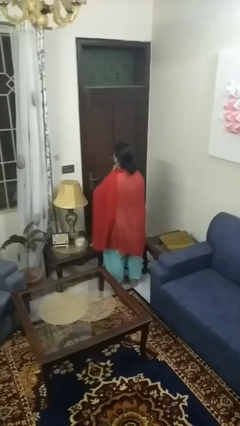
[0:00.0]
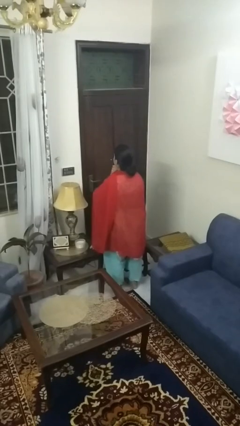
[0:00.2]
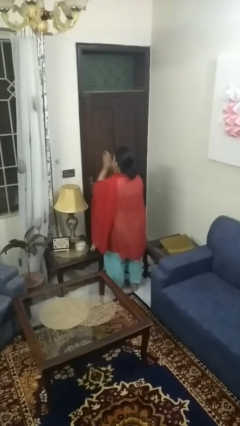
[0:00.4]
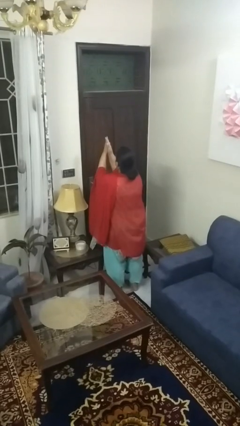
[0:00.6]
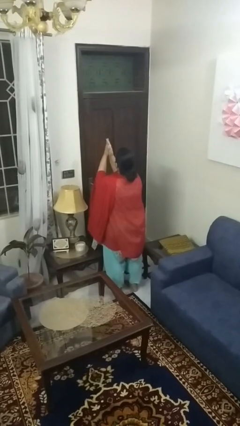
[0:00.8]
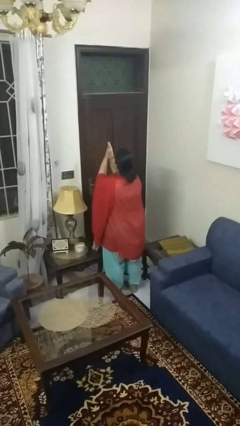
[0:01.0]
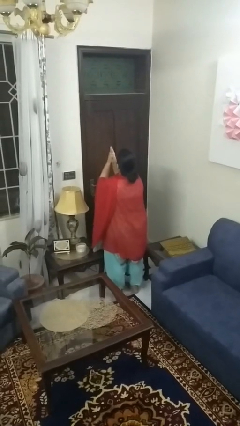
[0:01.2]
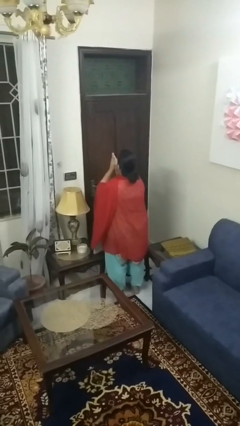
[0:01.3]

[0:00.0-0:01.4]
person swats bug

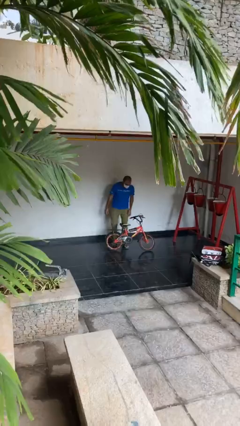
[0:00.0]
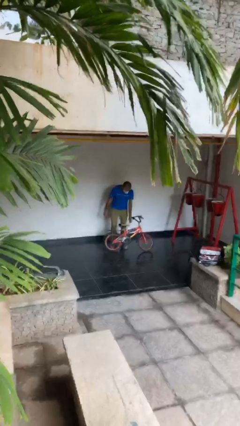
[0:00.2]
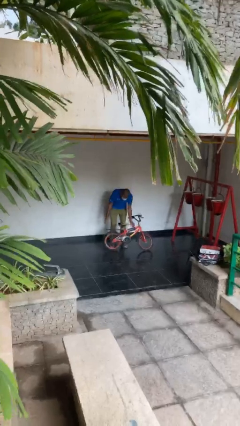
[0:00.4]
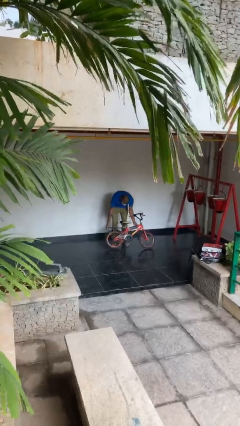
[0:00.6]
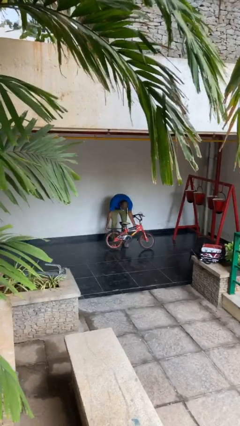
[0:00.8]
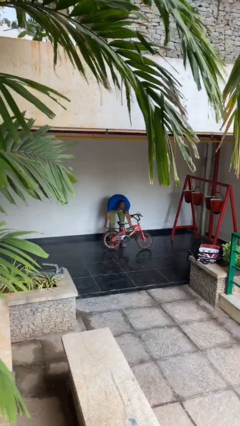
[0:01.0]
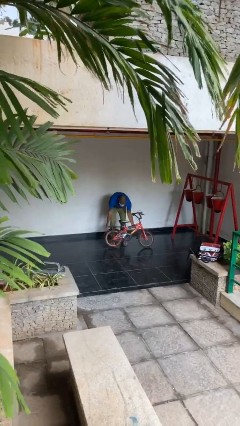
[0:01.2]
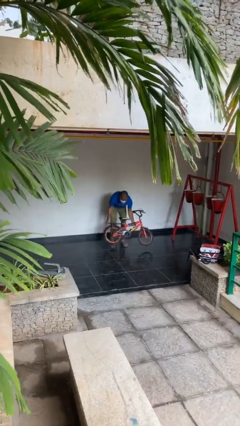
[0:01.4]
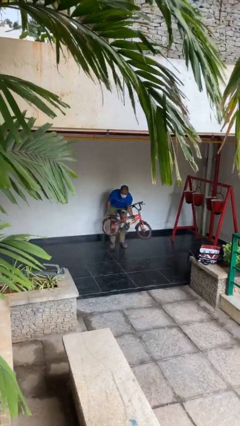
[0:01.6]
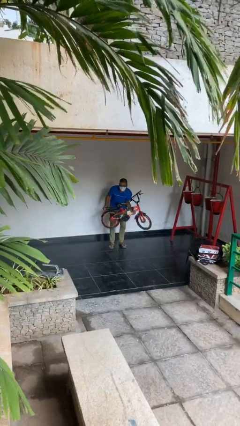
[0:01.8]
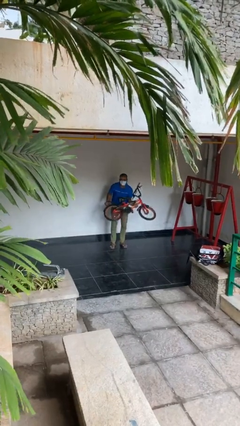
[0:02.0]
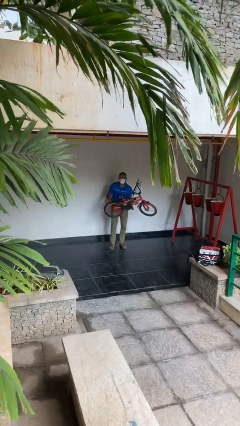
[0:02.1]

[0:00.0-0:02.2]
person picks up object from floor

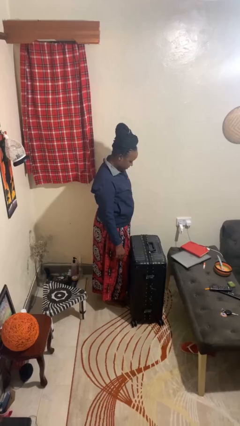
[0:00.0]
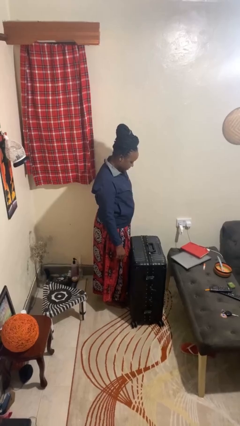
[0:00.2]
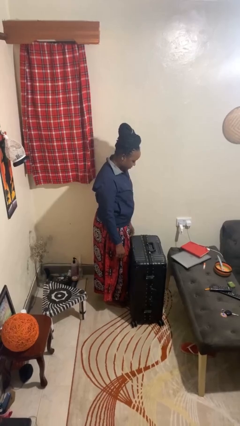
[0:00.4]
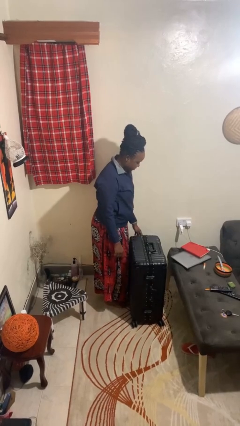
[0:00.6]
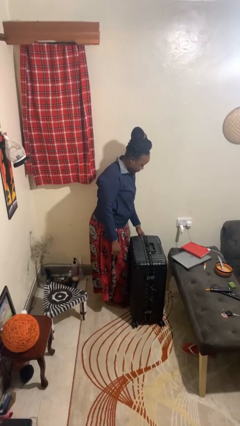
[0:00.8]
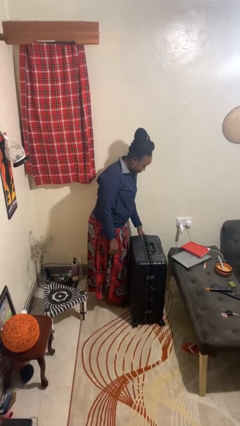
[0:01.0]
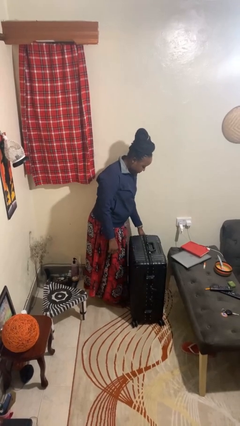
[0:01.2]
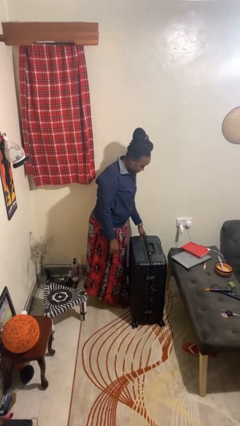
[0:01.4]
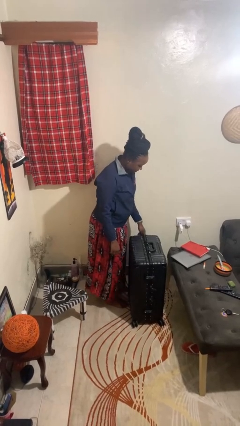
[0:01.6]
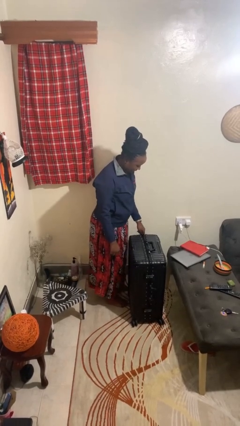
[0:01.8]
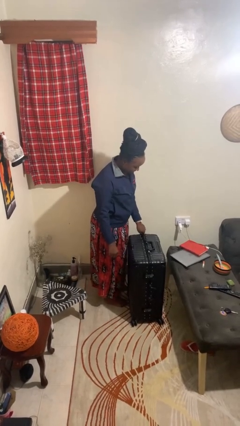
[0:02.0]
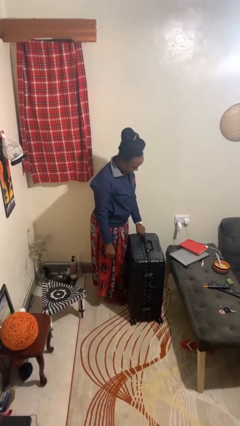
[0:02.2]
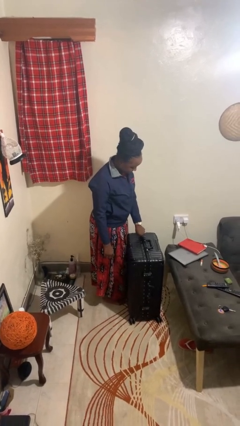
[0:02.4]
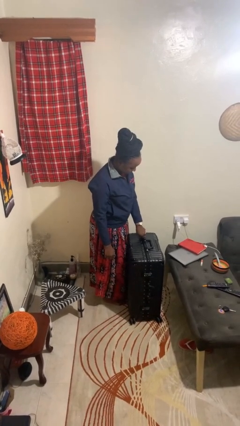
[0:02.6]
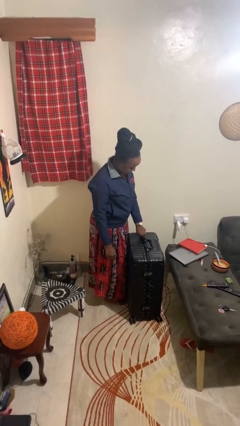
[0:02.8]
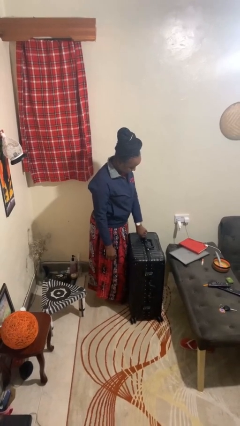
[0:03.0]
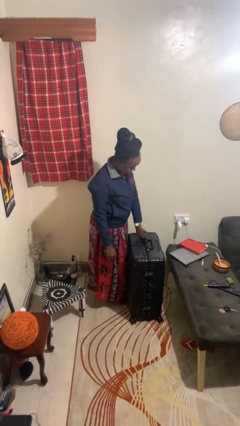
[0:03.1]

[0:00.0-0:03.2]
person opens suitcase

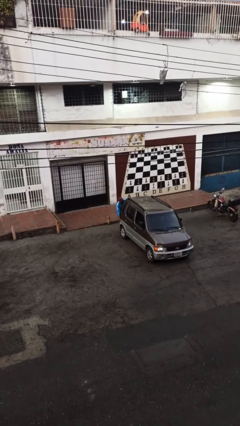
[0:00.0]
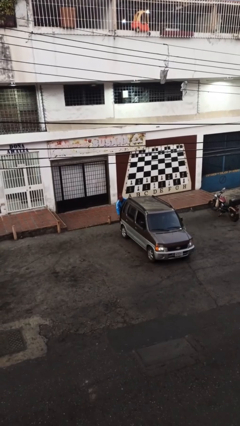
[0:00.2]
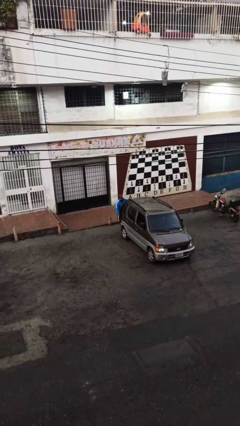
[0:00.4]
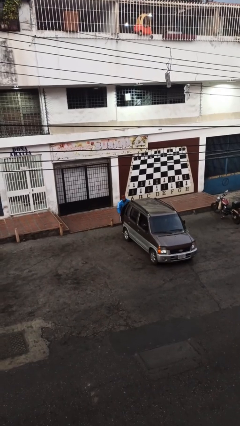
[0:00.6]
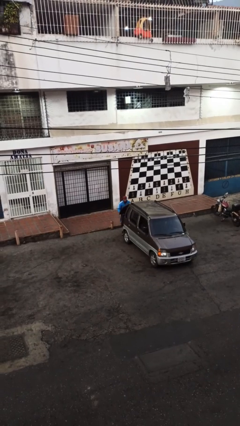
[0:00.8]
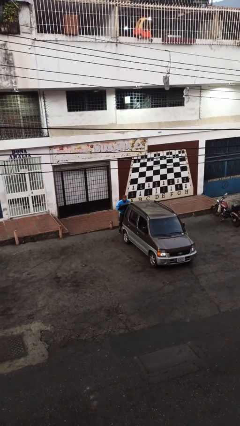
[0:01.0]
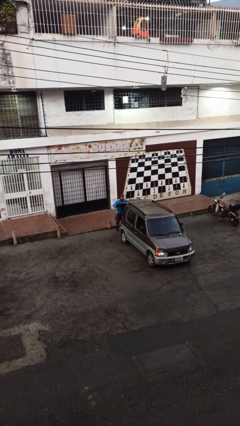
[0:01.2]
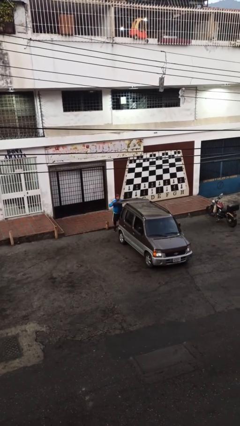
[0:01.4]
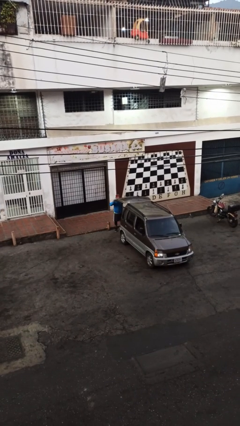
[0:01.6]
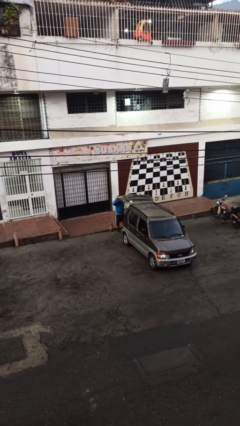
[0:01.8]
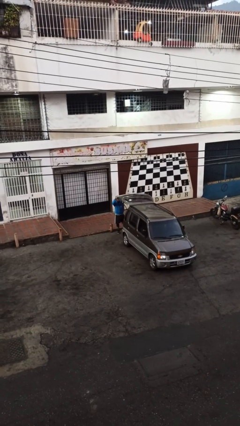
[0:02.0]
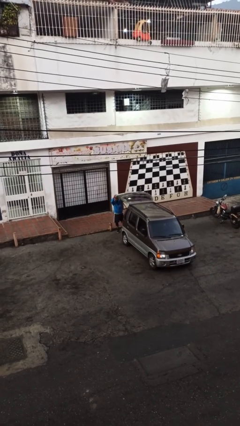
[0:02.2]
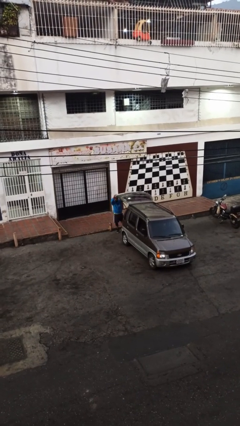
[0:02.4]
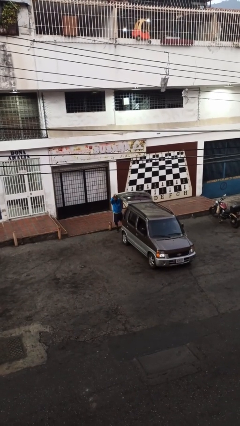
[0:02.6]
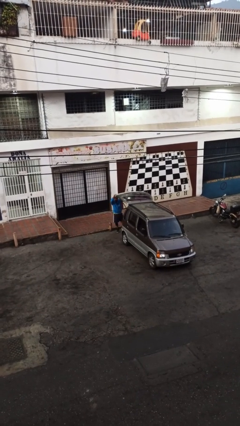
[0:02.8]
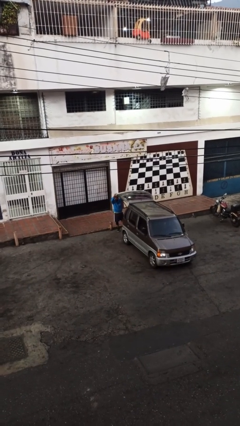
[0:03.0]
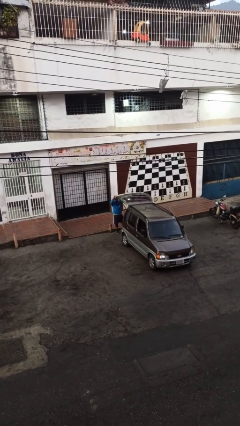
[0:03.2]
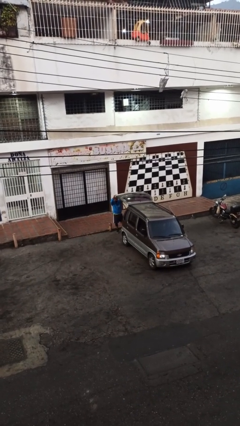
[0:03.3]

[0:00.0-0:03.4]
person opens car trunk

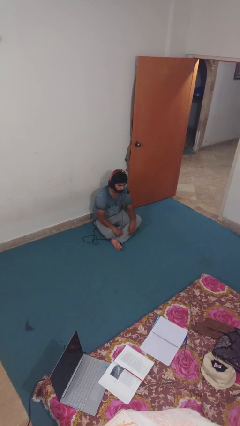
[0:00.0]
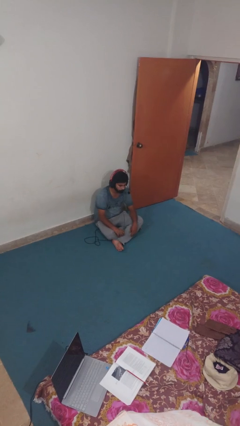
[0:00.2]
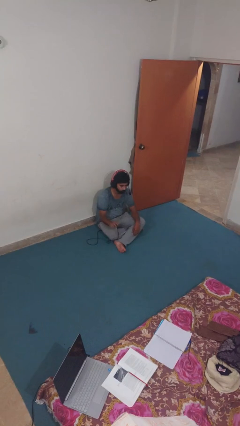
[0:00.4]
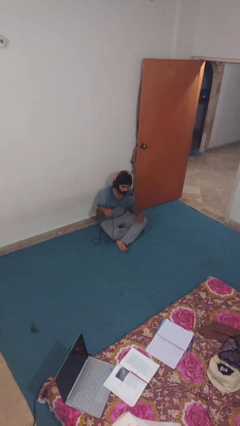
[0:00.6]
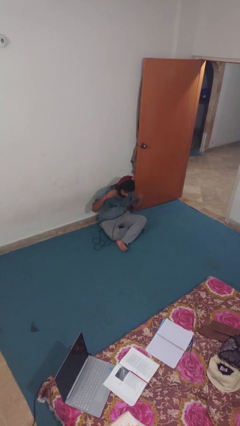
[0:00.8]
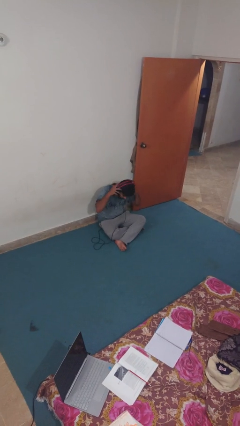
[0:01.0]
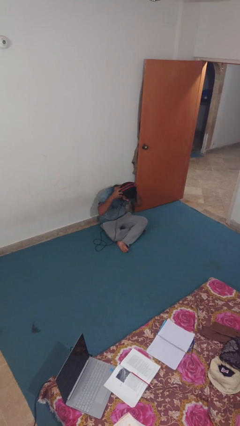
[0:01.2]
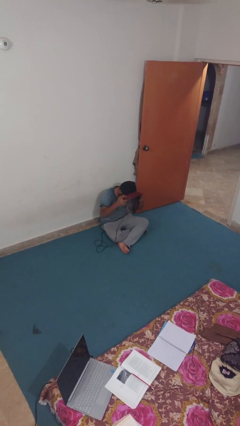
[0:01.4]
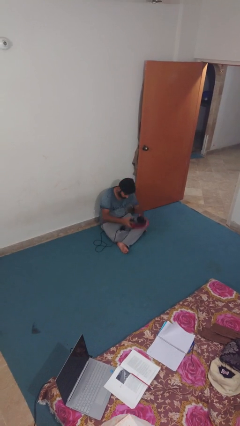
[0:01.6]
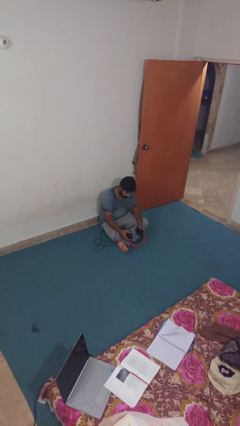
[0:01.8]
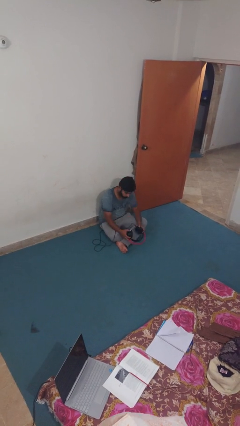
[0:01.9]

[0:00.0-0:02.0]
person takes off headphones

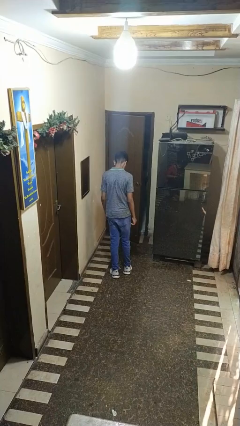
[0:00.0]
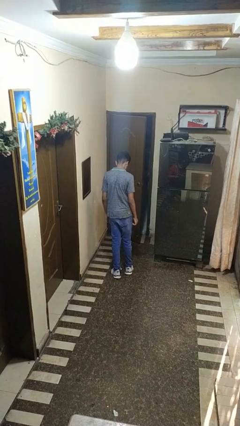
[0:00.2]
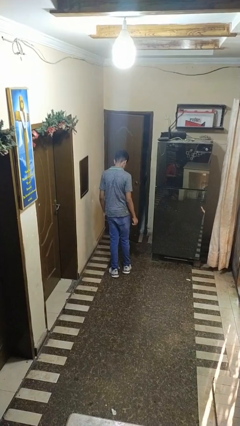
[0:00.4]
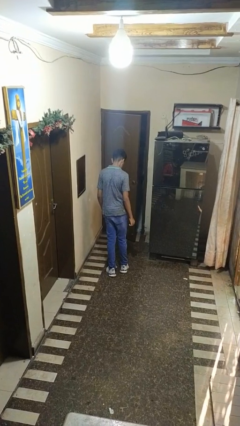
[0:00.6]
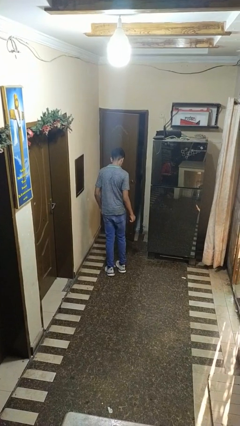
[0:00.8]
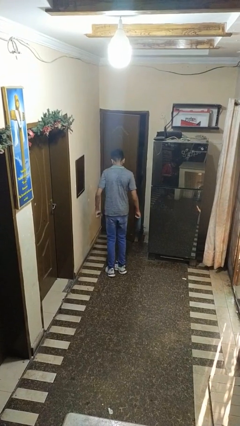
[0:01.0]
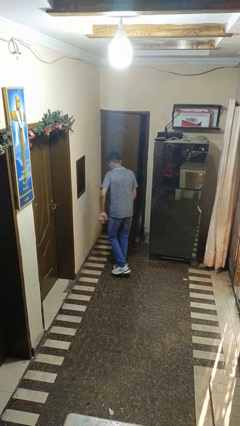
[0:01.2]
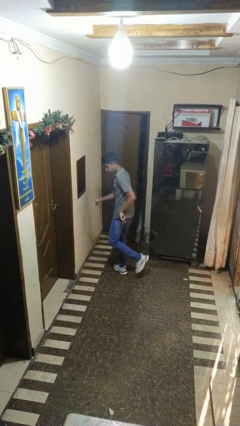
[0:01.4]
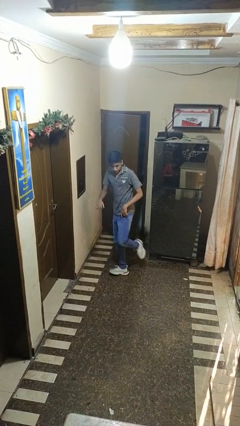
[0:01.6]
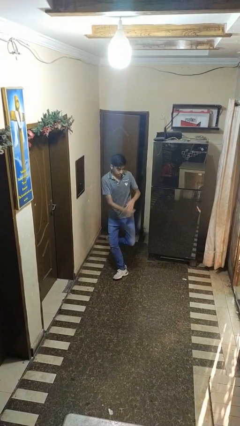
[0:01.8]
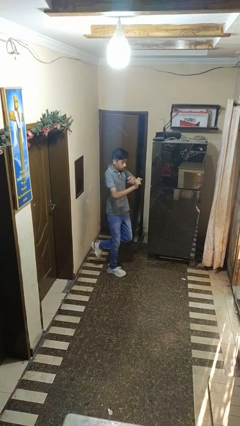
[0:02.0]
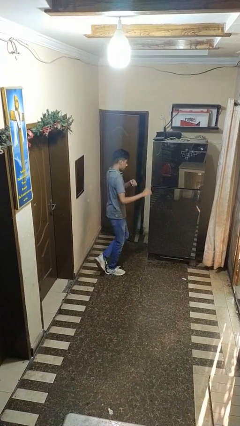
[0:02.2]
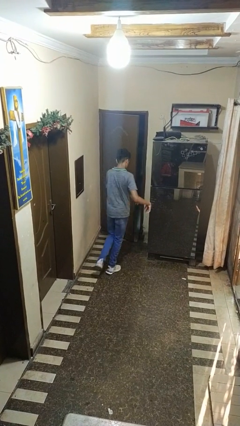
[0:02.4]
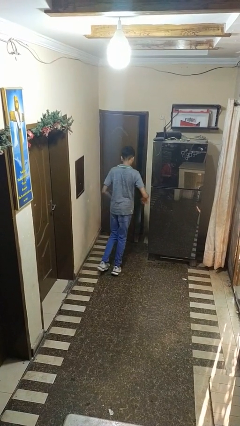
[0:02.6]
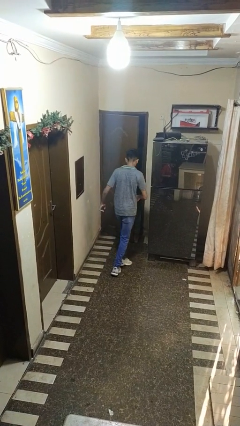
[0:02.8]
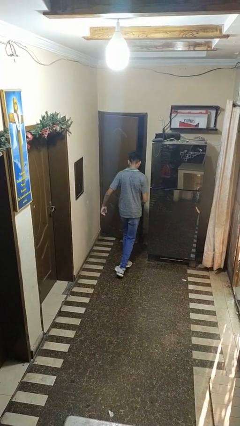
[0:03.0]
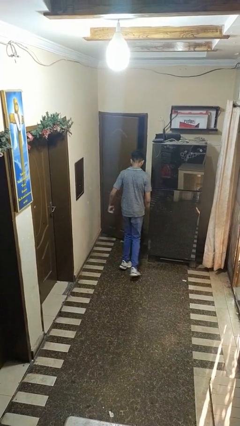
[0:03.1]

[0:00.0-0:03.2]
person twirls

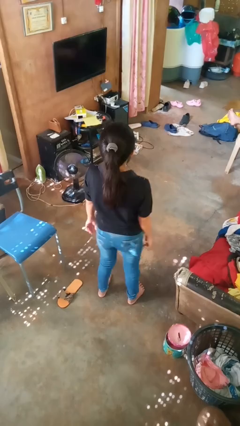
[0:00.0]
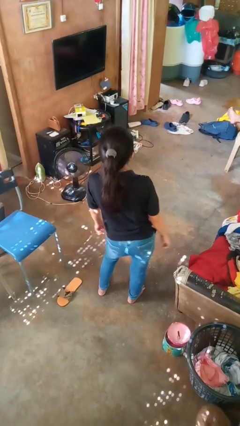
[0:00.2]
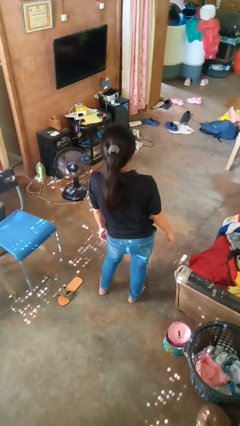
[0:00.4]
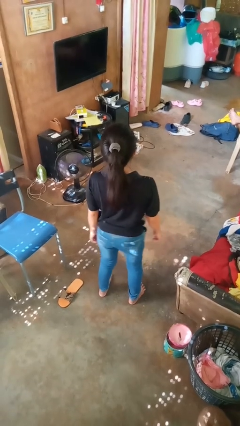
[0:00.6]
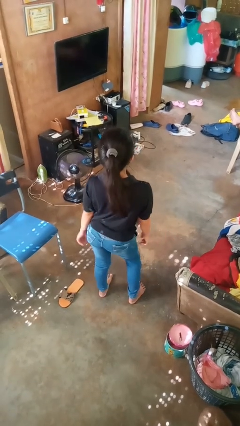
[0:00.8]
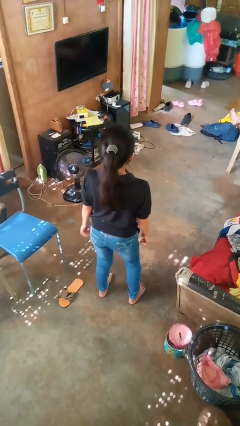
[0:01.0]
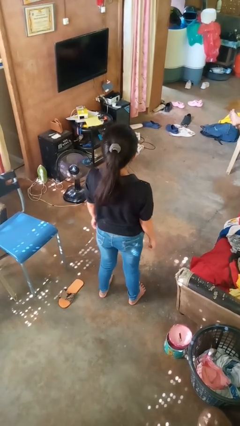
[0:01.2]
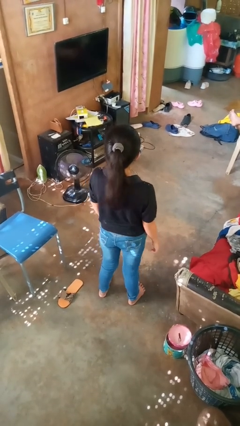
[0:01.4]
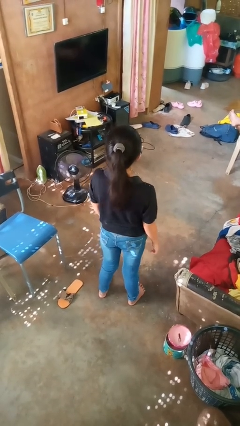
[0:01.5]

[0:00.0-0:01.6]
person wiggles hips

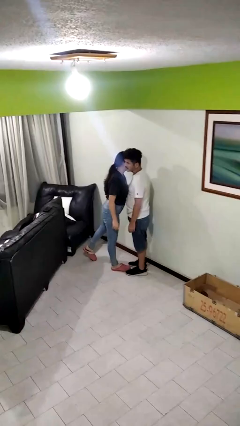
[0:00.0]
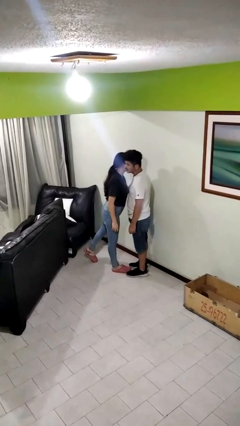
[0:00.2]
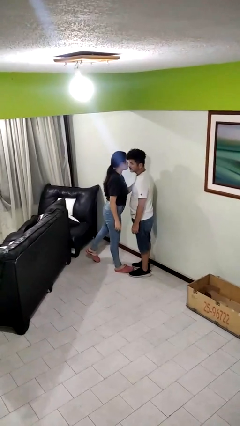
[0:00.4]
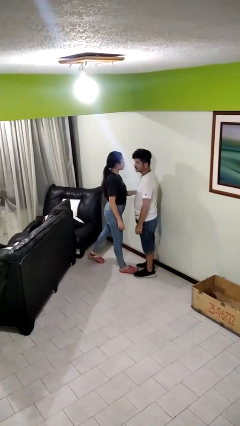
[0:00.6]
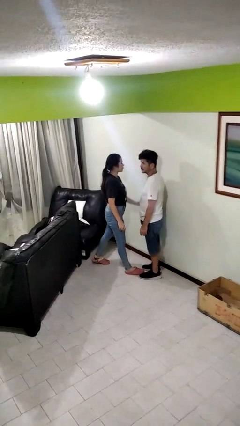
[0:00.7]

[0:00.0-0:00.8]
person kisses cheek of person
